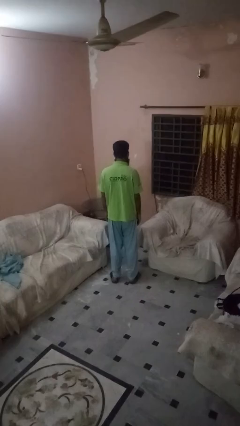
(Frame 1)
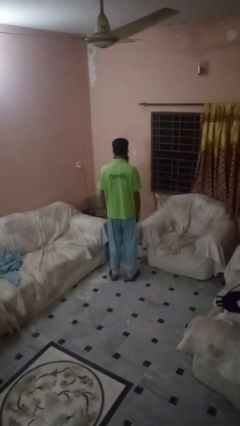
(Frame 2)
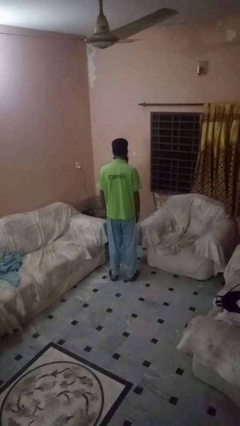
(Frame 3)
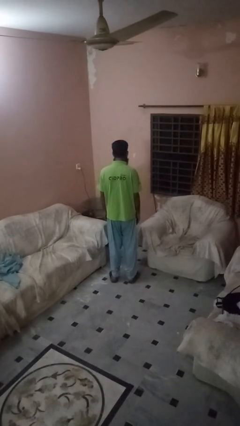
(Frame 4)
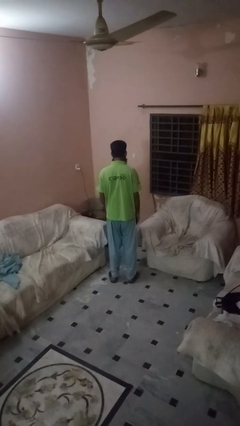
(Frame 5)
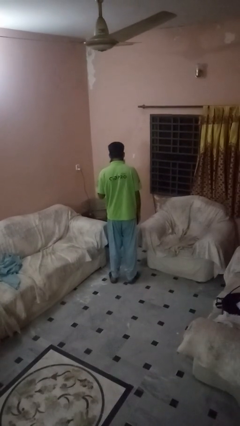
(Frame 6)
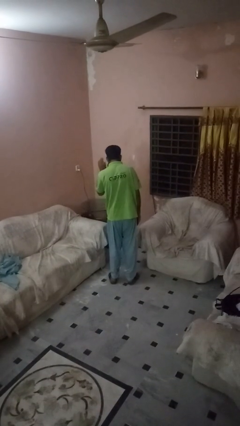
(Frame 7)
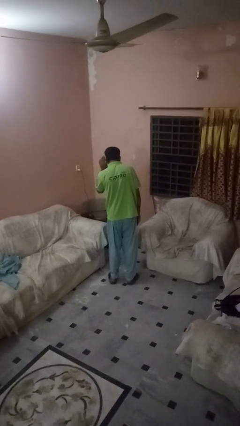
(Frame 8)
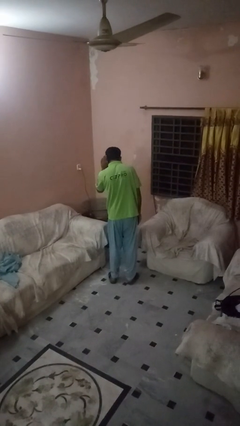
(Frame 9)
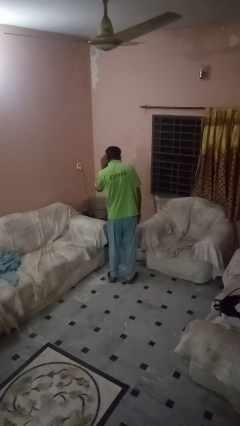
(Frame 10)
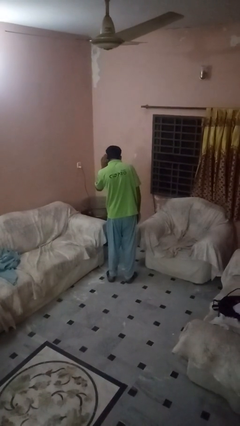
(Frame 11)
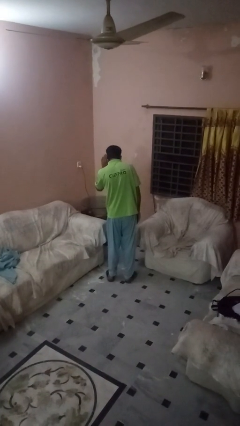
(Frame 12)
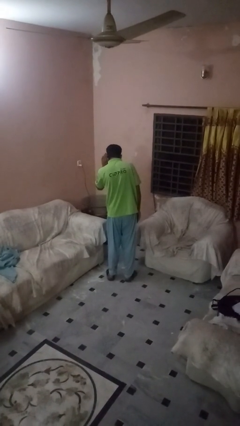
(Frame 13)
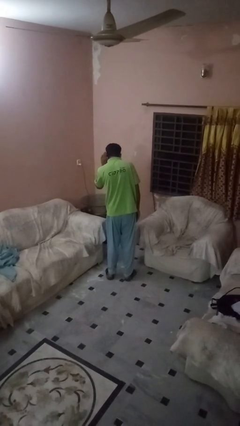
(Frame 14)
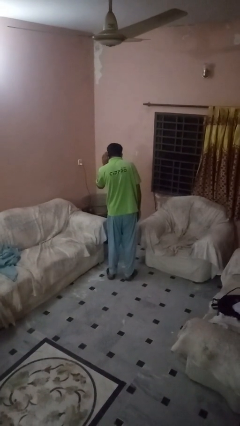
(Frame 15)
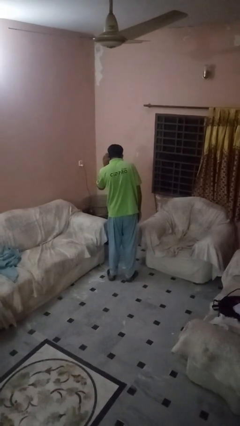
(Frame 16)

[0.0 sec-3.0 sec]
person gestures listen closely

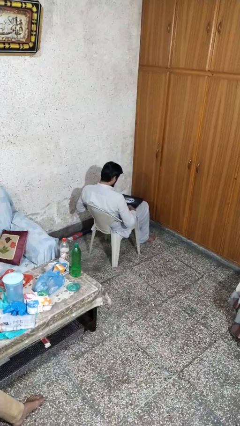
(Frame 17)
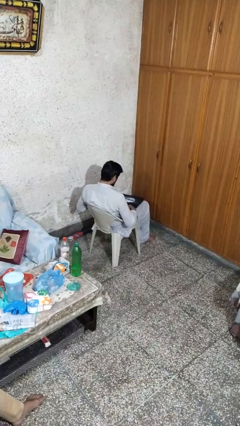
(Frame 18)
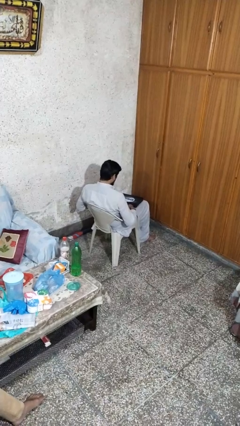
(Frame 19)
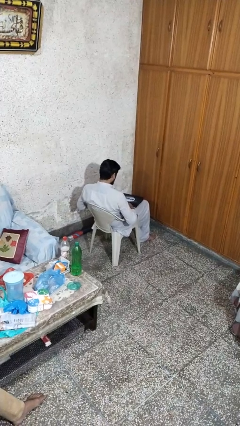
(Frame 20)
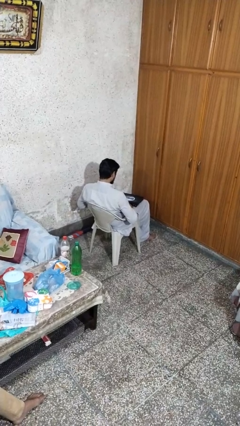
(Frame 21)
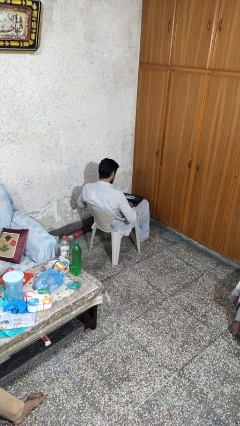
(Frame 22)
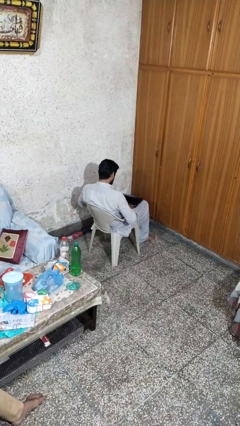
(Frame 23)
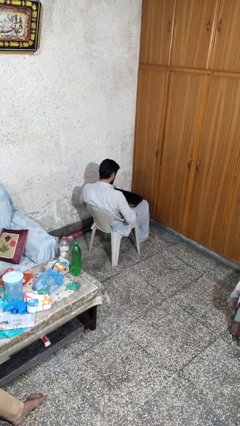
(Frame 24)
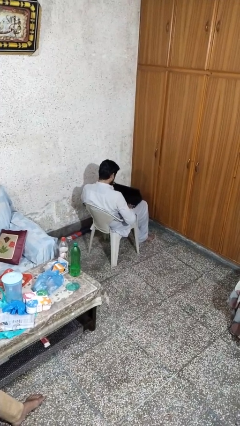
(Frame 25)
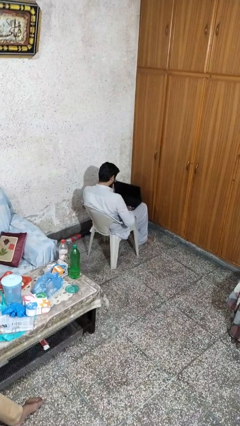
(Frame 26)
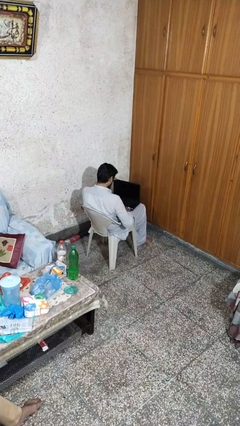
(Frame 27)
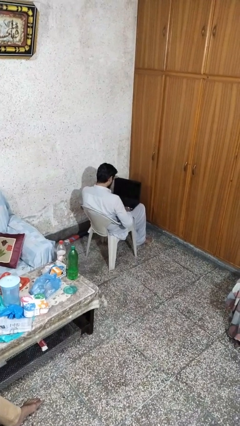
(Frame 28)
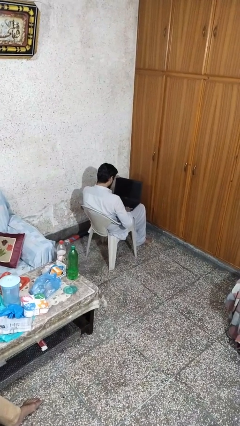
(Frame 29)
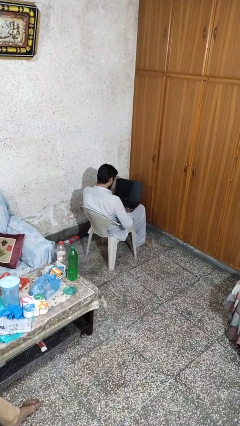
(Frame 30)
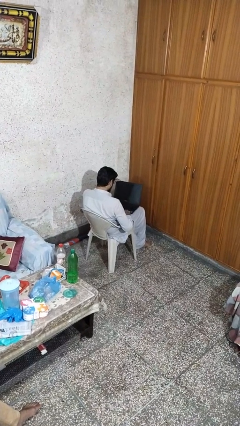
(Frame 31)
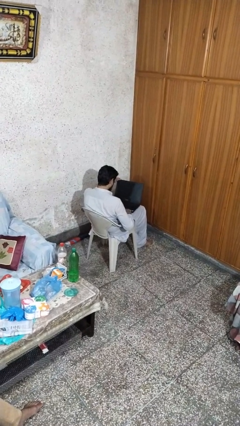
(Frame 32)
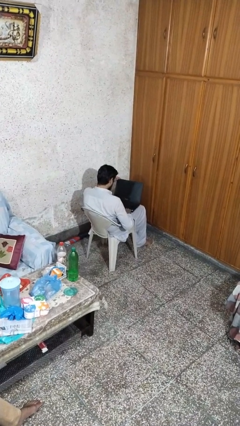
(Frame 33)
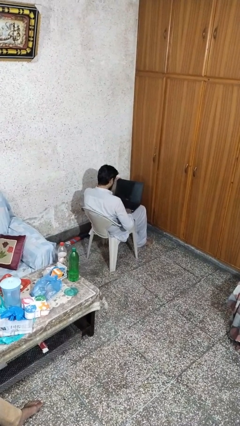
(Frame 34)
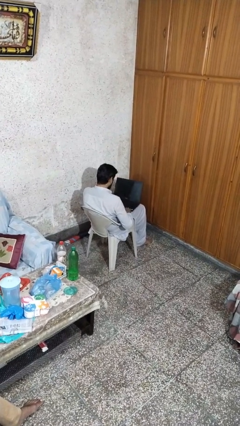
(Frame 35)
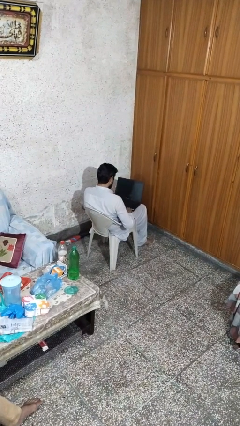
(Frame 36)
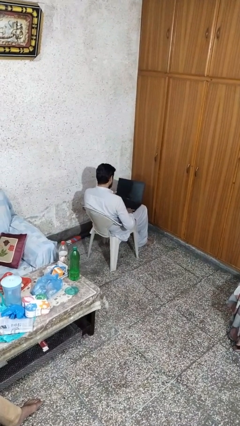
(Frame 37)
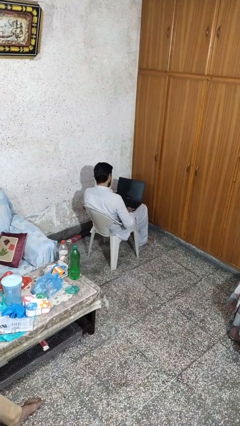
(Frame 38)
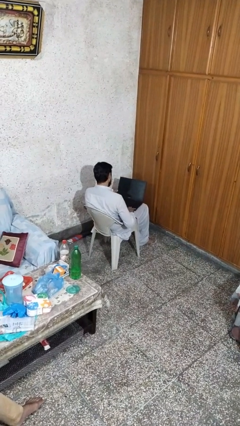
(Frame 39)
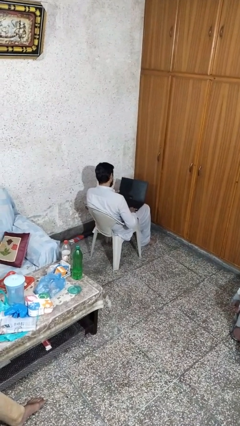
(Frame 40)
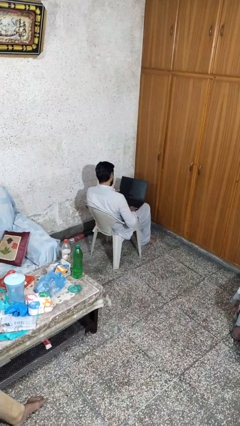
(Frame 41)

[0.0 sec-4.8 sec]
person opens laptop

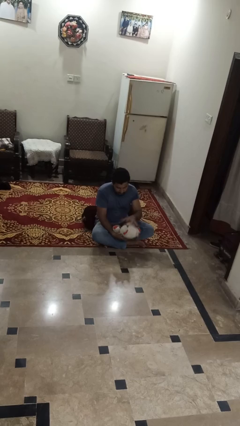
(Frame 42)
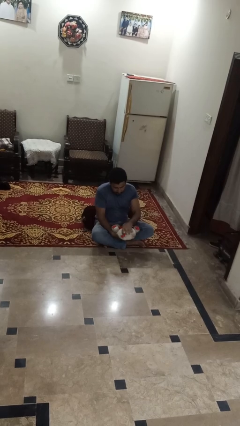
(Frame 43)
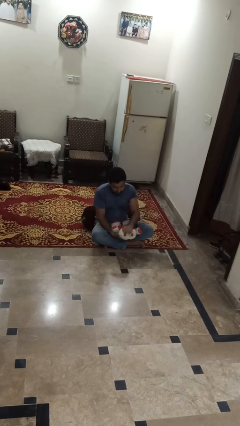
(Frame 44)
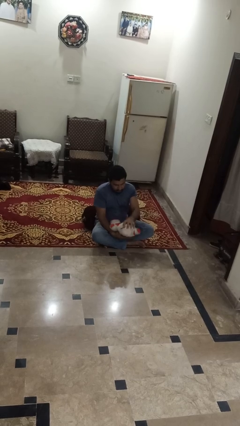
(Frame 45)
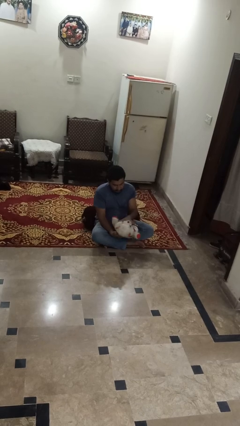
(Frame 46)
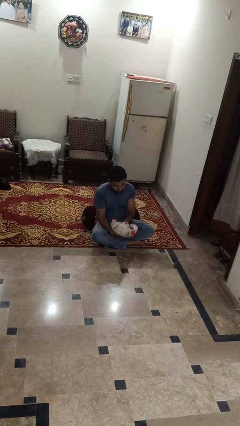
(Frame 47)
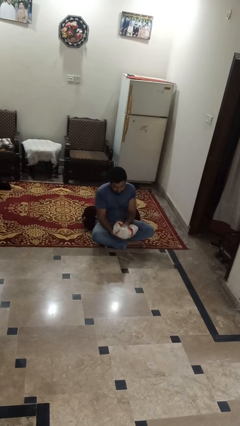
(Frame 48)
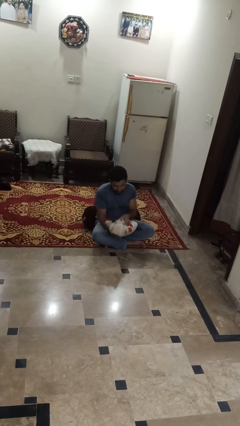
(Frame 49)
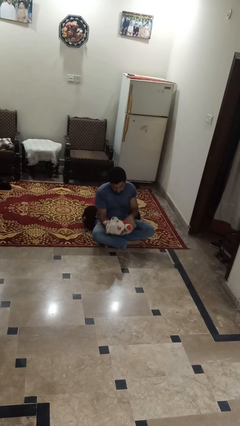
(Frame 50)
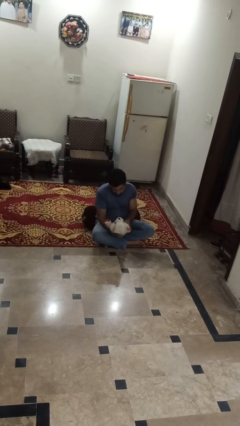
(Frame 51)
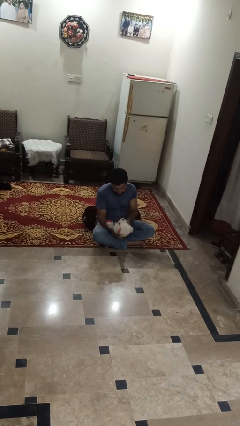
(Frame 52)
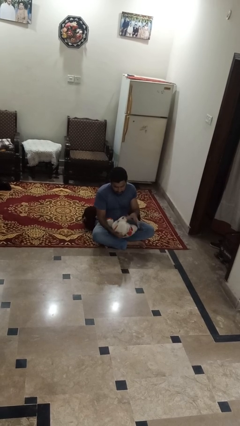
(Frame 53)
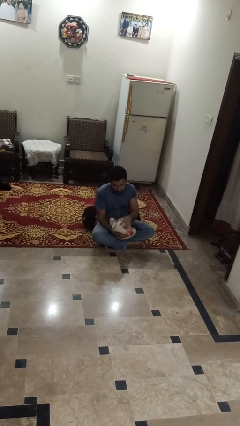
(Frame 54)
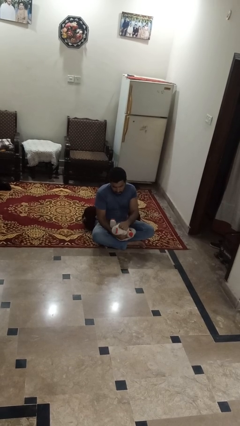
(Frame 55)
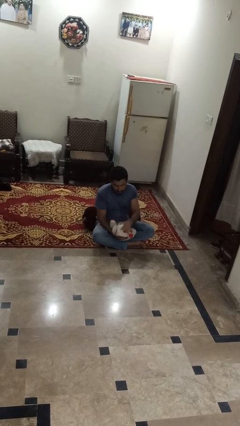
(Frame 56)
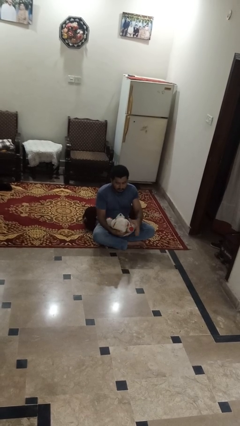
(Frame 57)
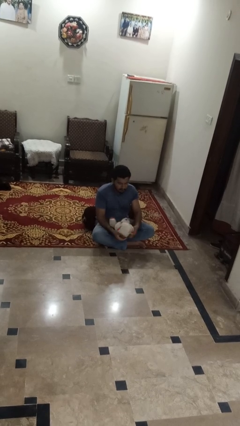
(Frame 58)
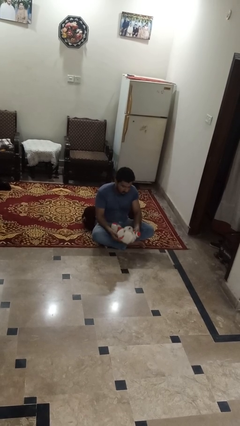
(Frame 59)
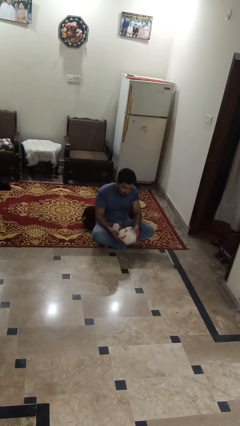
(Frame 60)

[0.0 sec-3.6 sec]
person squeezes object

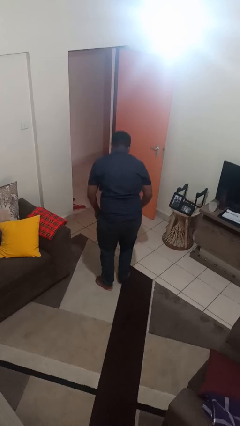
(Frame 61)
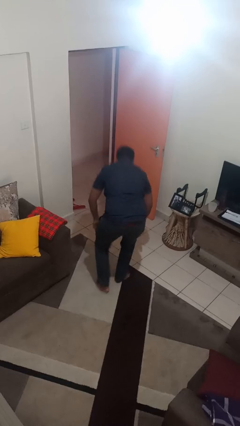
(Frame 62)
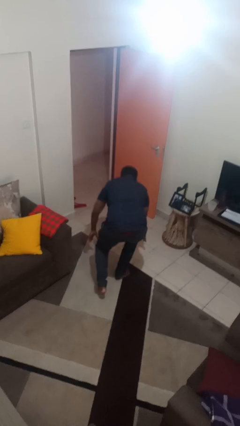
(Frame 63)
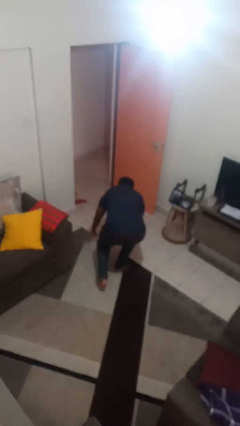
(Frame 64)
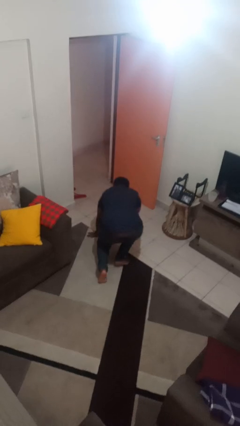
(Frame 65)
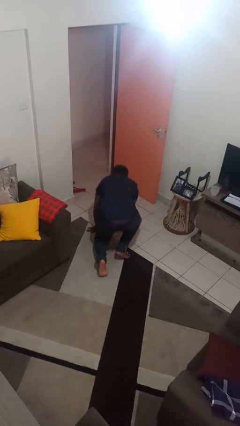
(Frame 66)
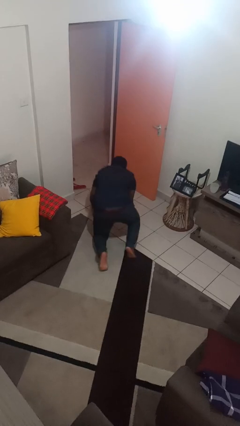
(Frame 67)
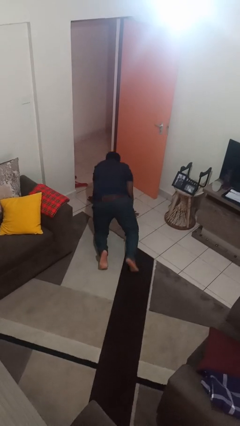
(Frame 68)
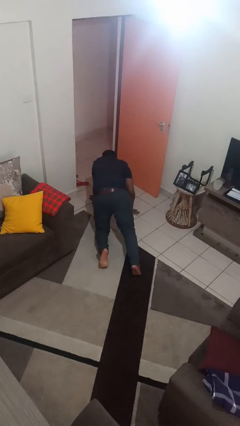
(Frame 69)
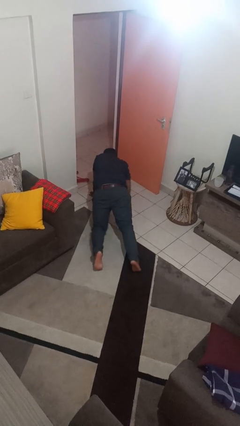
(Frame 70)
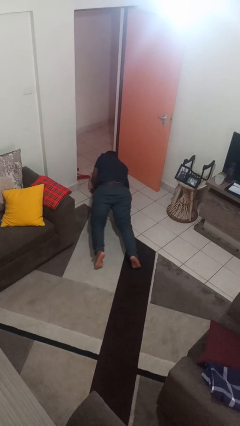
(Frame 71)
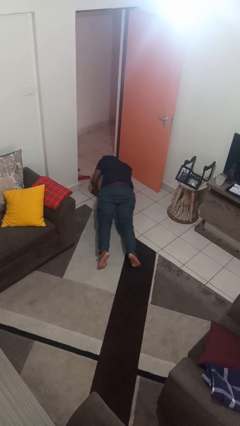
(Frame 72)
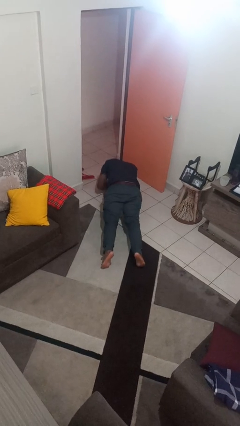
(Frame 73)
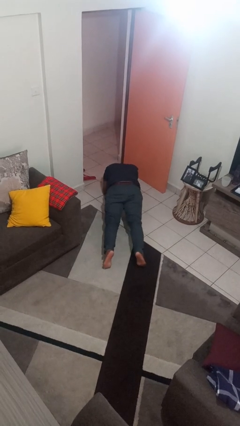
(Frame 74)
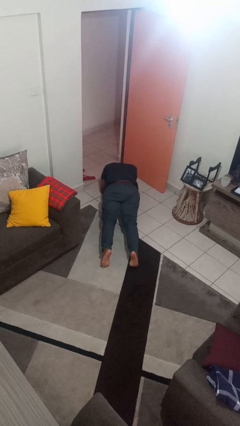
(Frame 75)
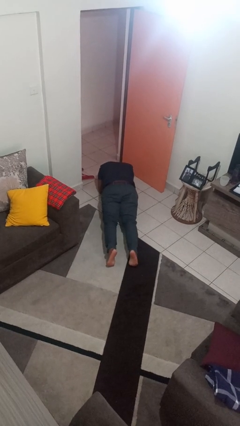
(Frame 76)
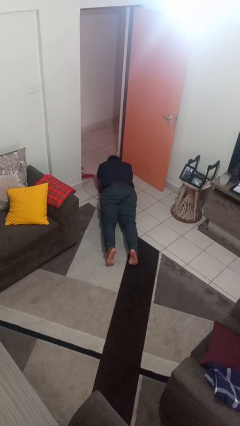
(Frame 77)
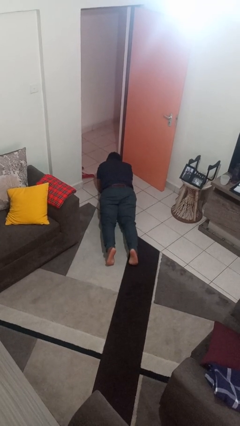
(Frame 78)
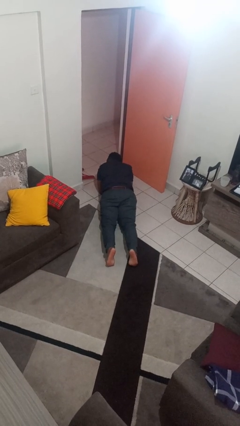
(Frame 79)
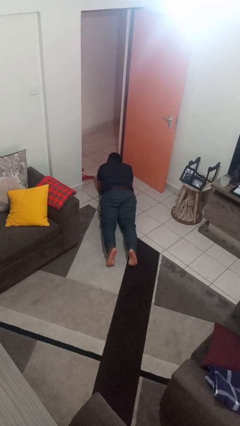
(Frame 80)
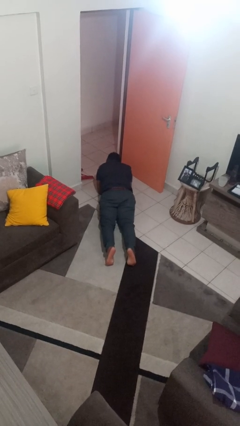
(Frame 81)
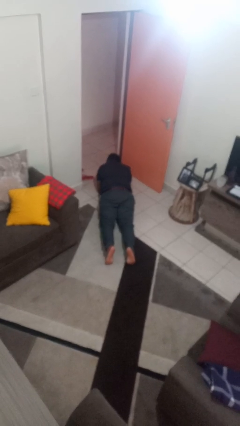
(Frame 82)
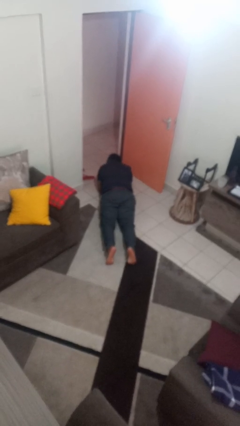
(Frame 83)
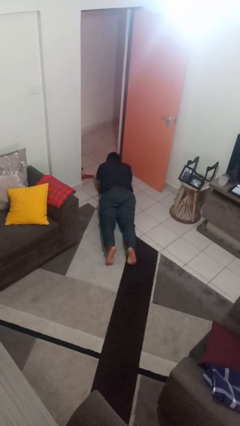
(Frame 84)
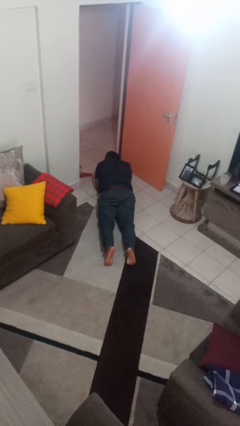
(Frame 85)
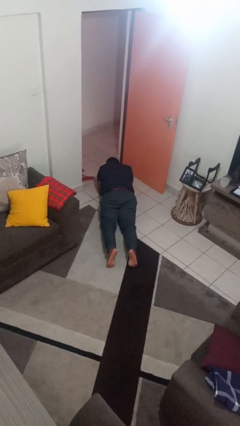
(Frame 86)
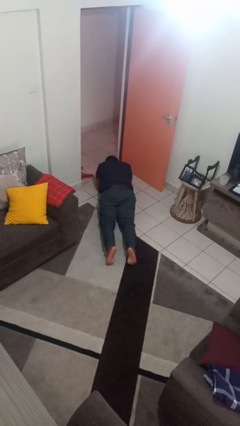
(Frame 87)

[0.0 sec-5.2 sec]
person exercises with plank

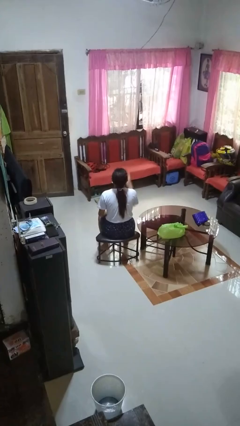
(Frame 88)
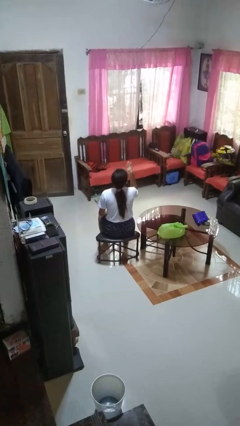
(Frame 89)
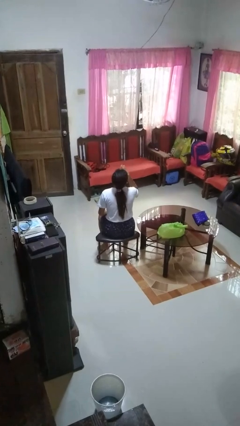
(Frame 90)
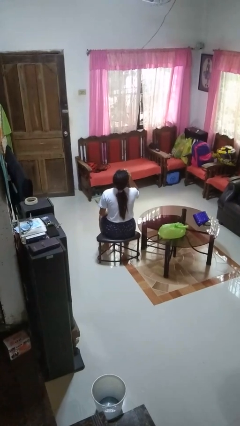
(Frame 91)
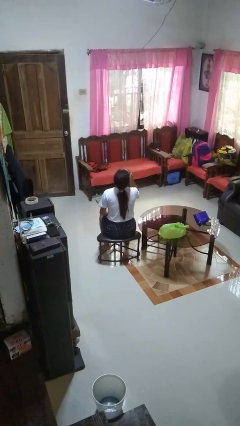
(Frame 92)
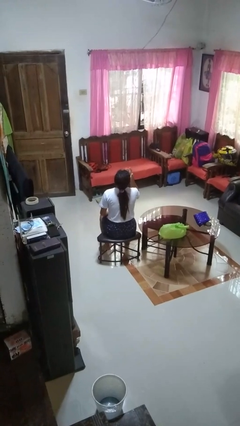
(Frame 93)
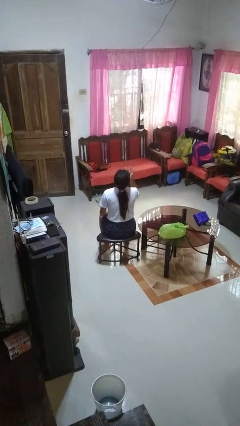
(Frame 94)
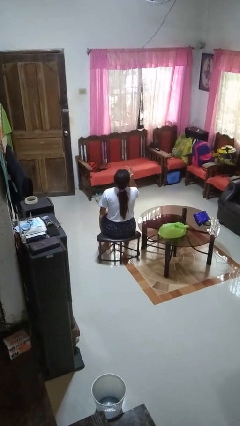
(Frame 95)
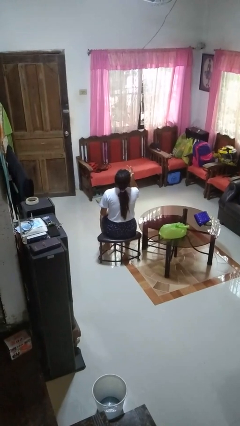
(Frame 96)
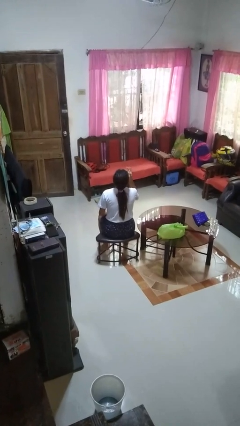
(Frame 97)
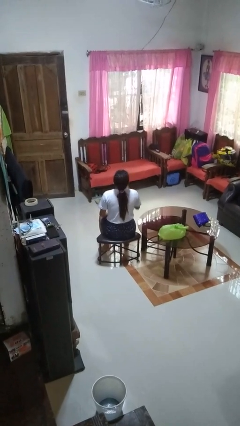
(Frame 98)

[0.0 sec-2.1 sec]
person licks fingers
